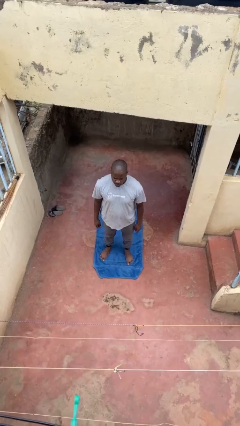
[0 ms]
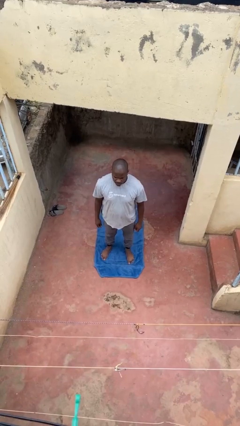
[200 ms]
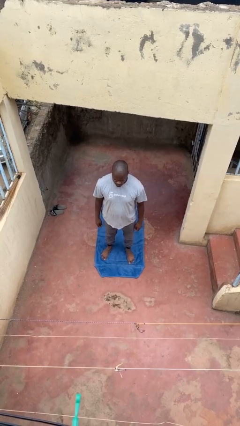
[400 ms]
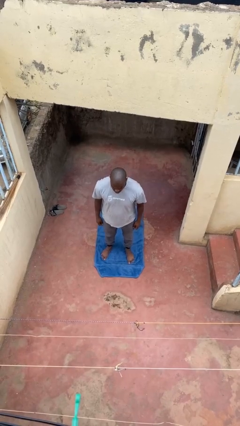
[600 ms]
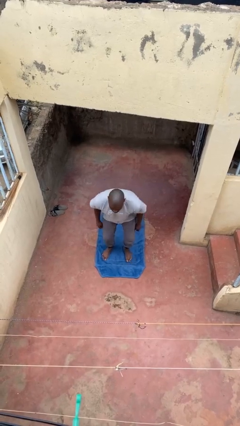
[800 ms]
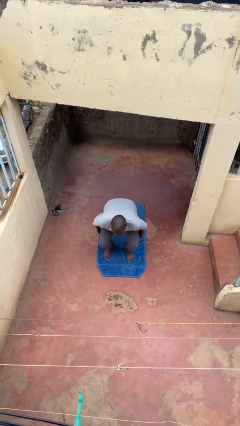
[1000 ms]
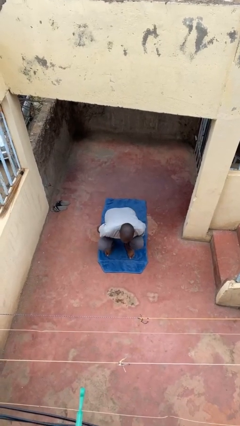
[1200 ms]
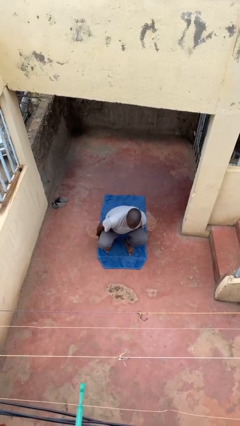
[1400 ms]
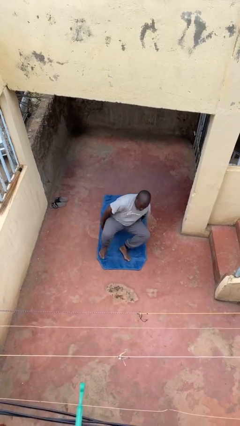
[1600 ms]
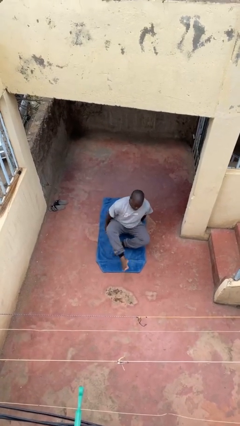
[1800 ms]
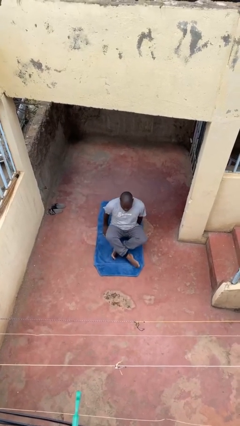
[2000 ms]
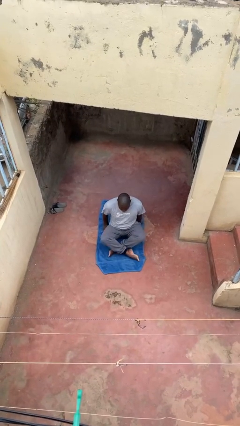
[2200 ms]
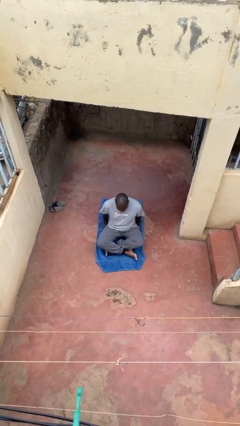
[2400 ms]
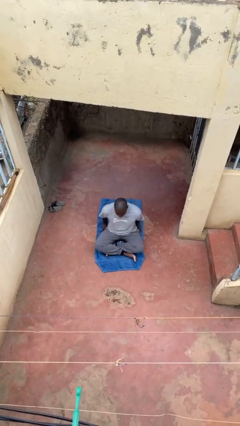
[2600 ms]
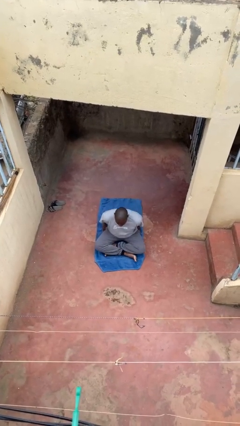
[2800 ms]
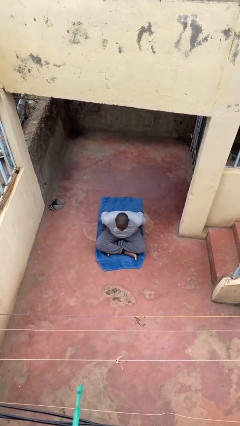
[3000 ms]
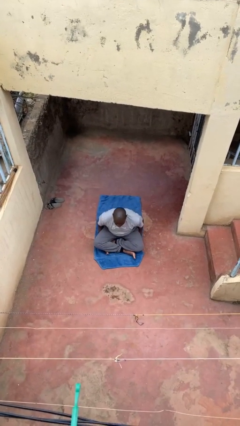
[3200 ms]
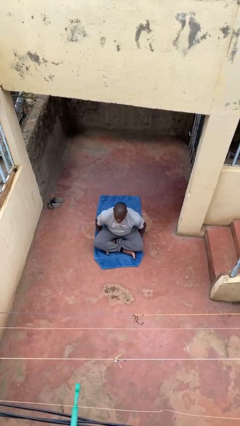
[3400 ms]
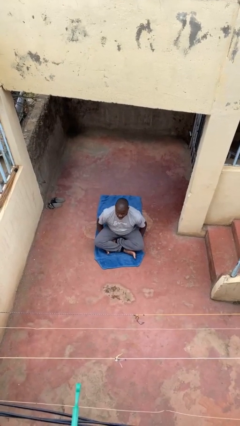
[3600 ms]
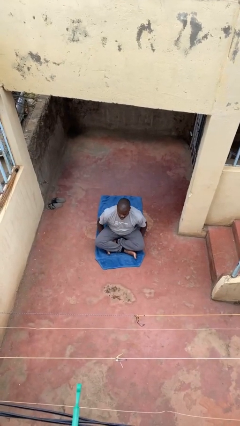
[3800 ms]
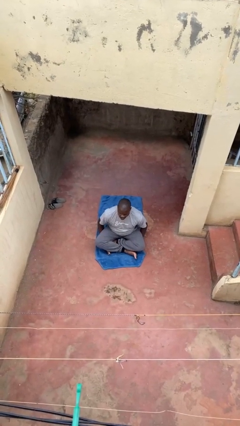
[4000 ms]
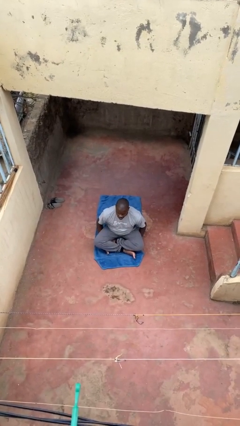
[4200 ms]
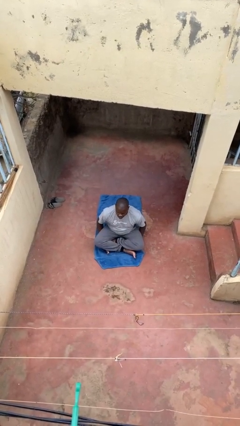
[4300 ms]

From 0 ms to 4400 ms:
person sits crisscross

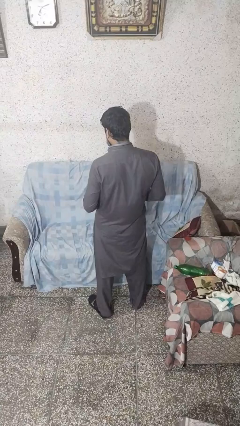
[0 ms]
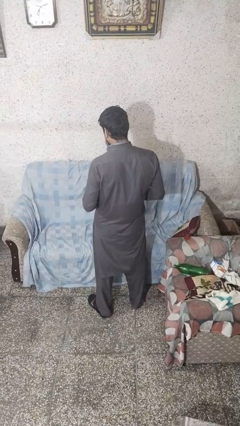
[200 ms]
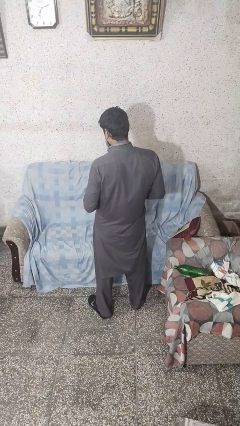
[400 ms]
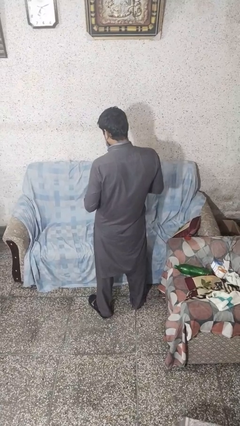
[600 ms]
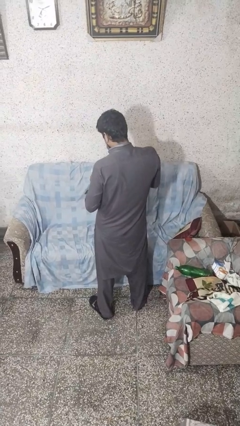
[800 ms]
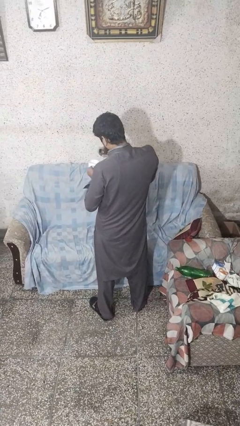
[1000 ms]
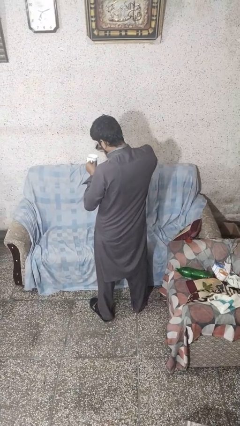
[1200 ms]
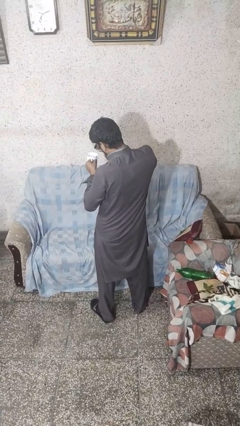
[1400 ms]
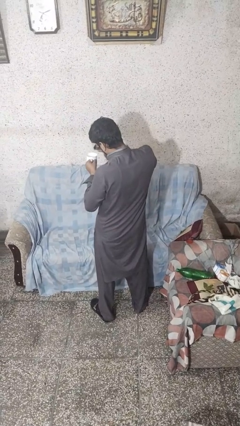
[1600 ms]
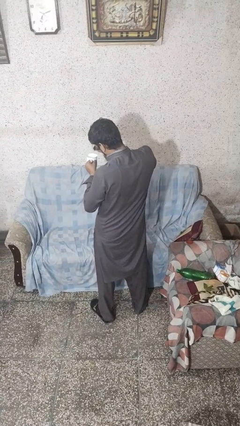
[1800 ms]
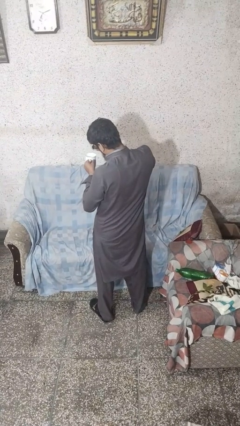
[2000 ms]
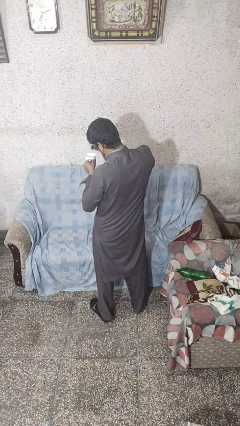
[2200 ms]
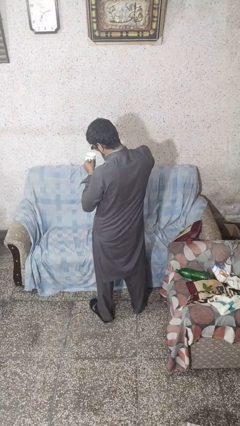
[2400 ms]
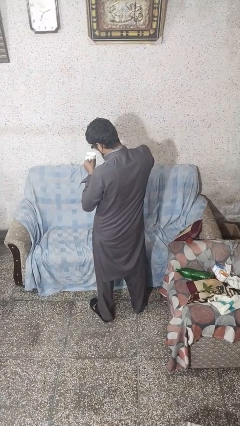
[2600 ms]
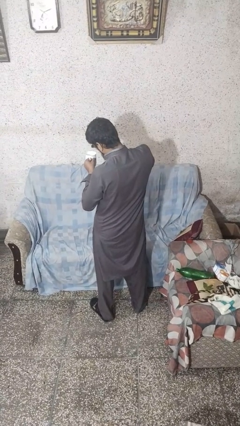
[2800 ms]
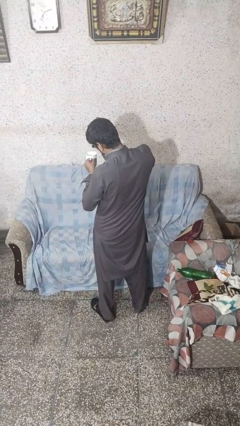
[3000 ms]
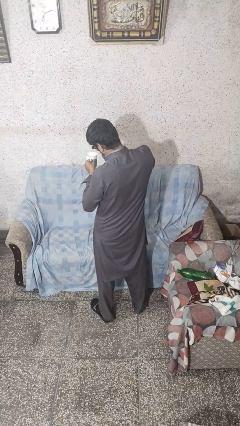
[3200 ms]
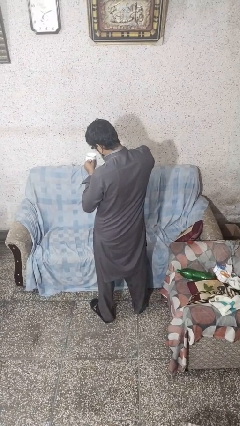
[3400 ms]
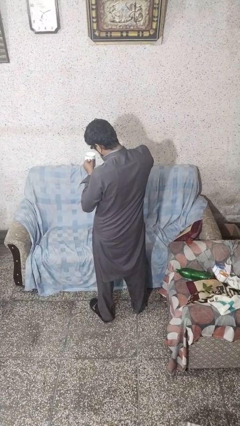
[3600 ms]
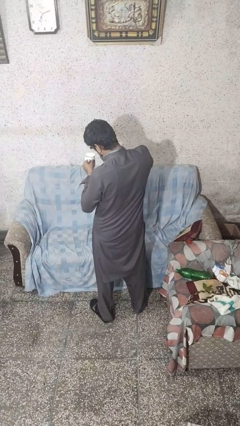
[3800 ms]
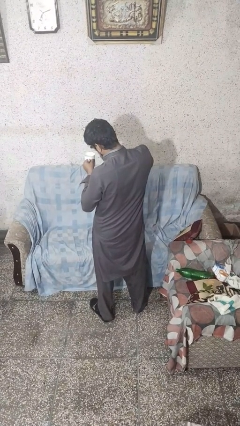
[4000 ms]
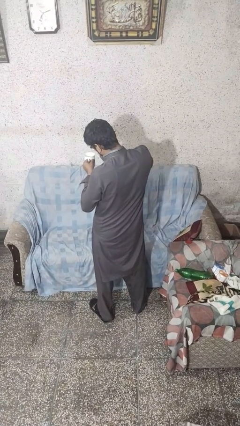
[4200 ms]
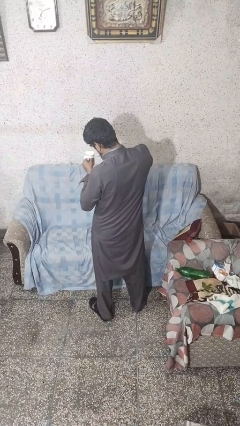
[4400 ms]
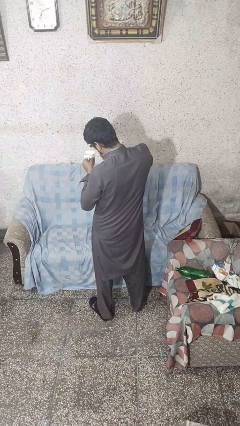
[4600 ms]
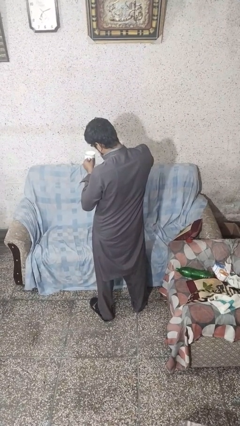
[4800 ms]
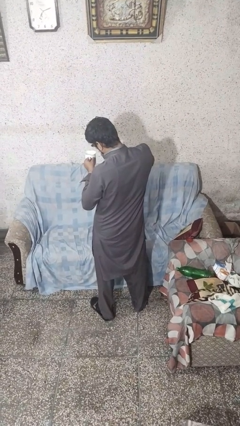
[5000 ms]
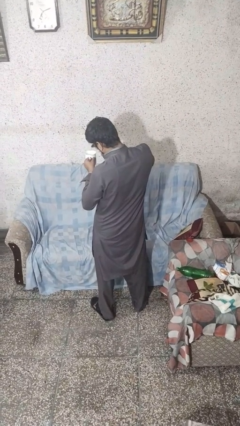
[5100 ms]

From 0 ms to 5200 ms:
person pours coffee into mug

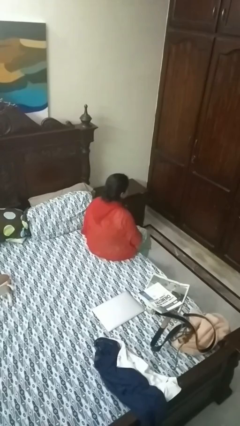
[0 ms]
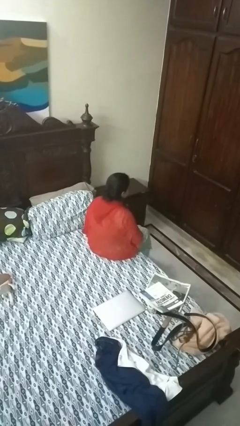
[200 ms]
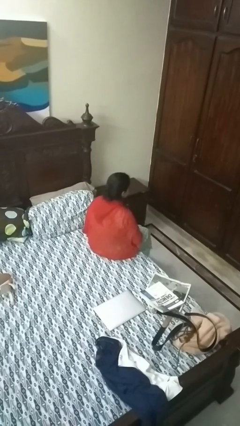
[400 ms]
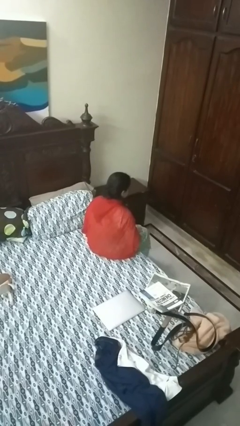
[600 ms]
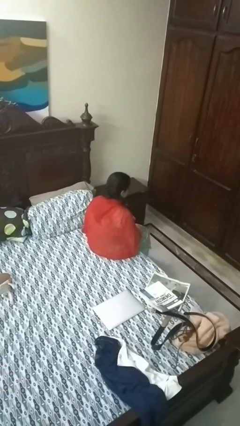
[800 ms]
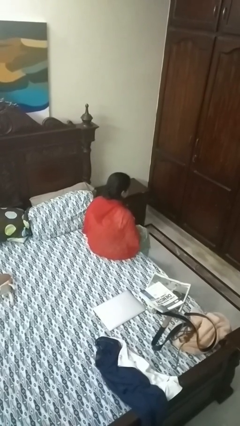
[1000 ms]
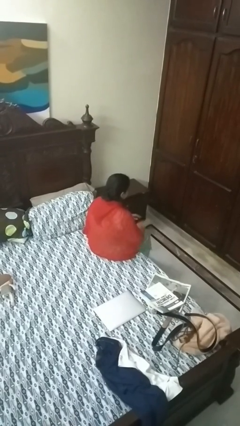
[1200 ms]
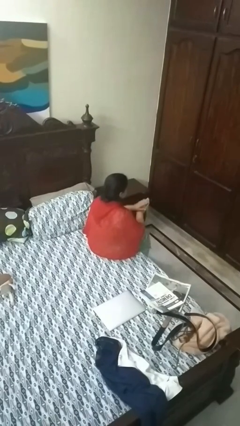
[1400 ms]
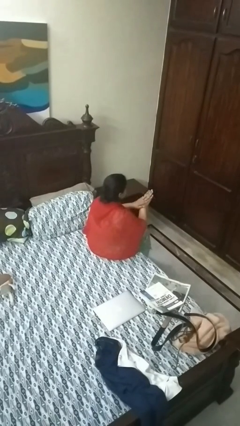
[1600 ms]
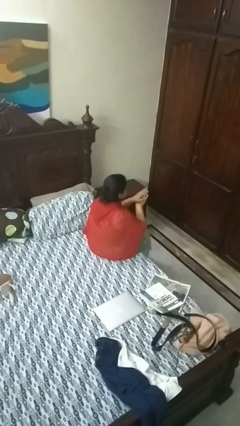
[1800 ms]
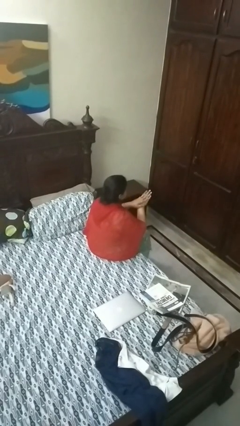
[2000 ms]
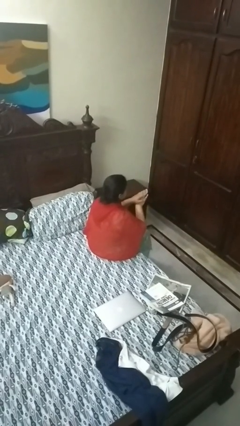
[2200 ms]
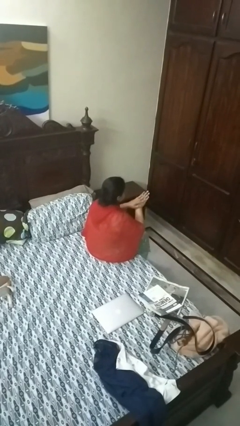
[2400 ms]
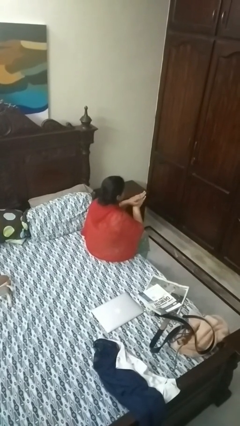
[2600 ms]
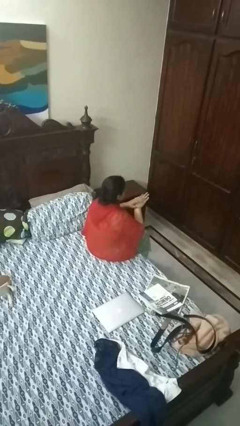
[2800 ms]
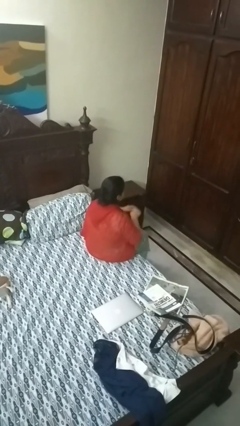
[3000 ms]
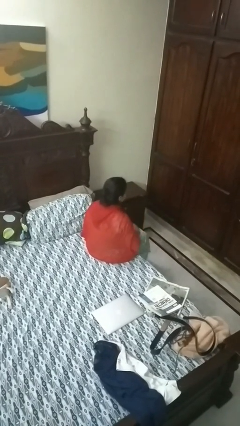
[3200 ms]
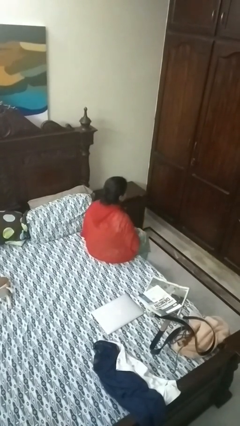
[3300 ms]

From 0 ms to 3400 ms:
person looks at hands in lap

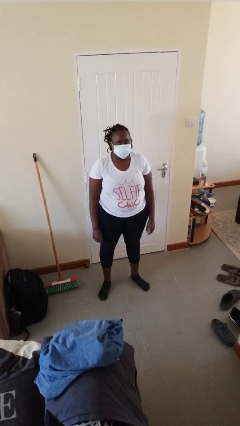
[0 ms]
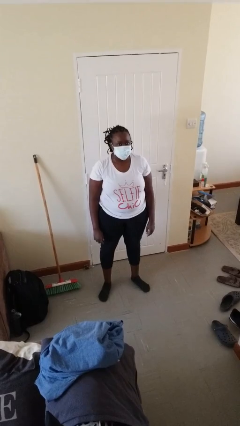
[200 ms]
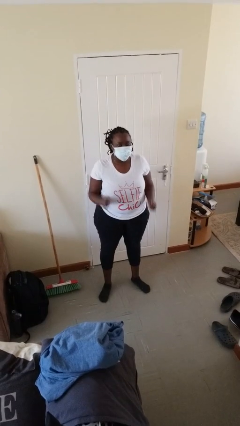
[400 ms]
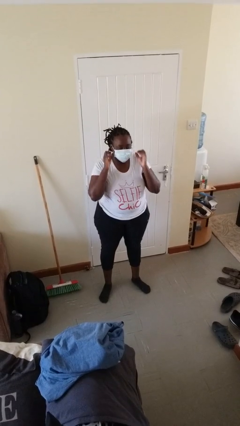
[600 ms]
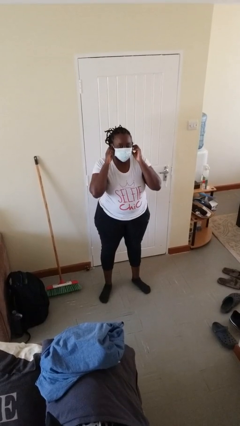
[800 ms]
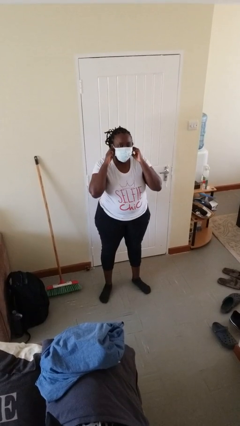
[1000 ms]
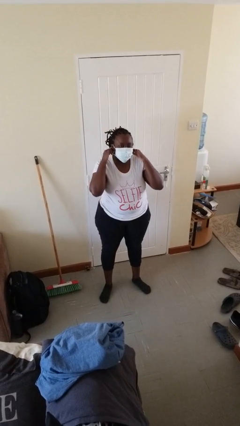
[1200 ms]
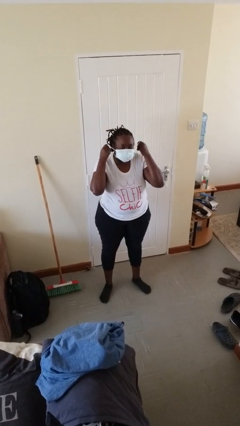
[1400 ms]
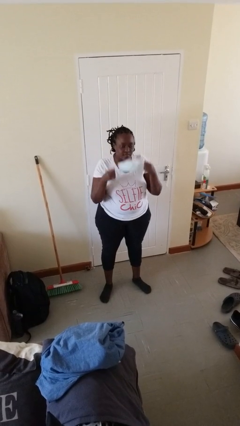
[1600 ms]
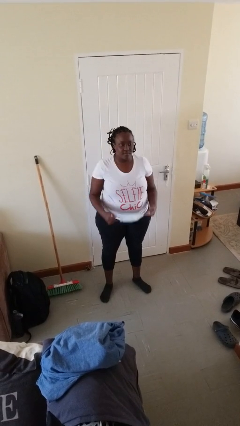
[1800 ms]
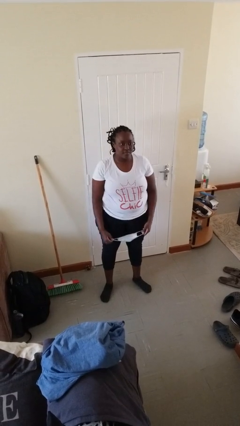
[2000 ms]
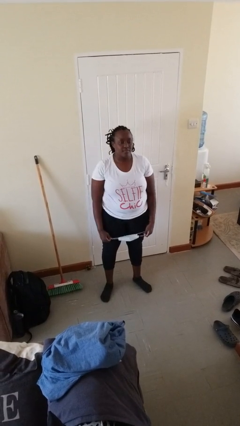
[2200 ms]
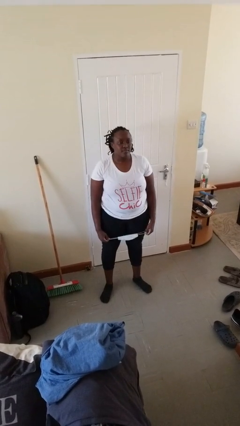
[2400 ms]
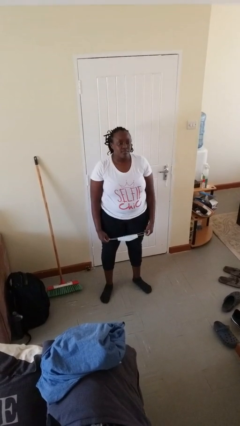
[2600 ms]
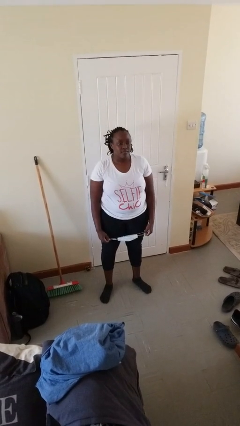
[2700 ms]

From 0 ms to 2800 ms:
person takes off facemask

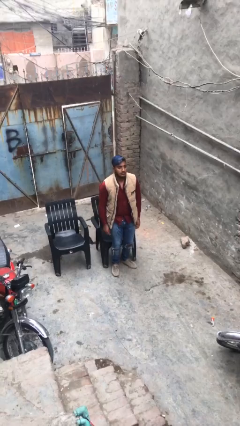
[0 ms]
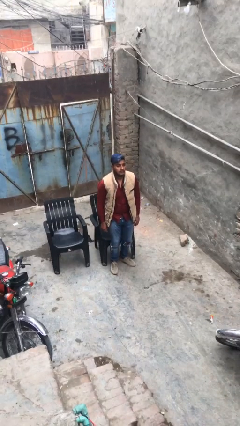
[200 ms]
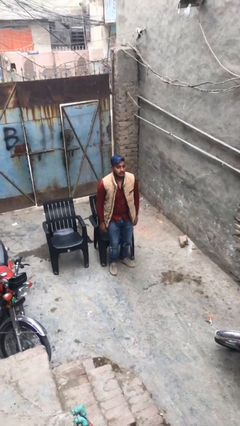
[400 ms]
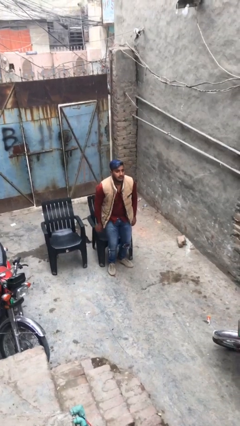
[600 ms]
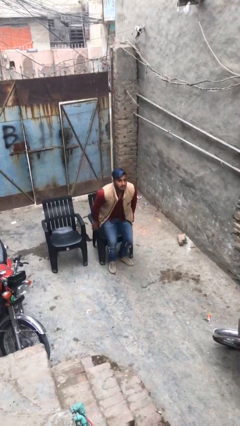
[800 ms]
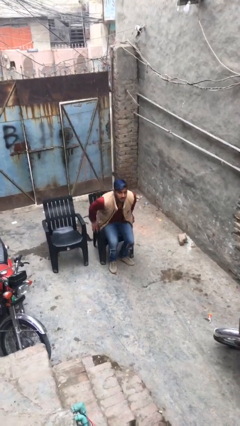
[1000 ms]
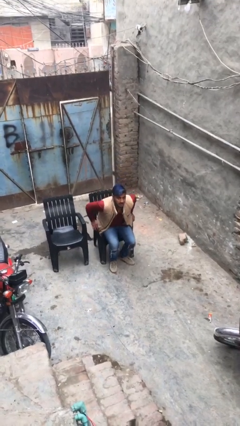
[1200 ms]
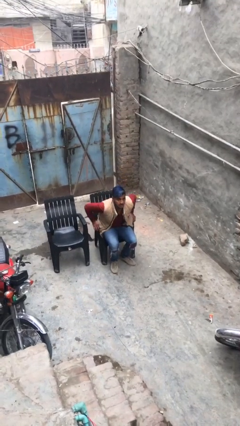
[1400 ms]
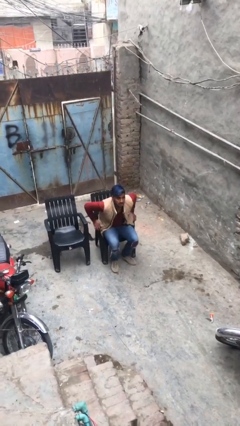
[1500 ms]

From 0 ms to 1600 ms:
person sits down
